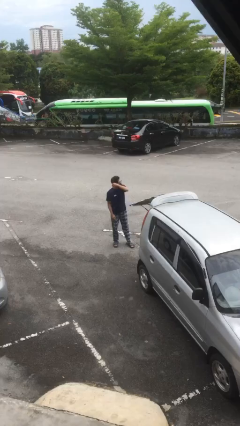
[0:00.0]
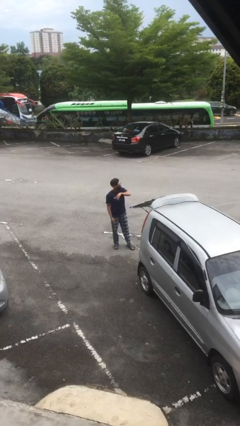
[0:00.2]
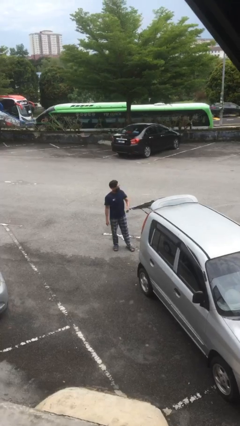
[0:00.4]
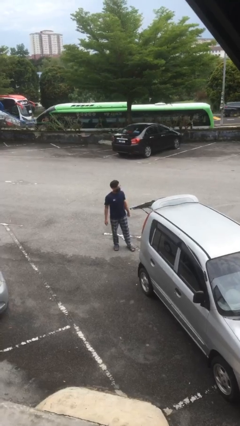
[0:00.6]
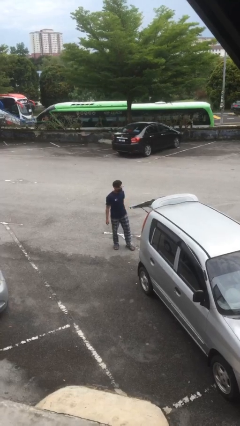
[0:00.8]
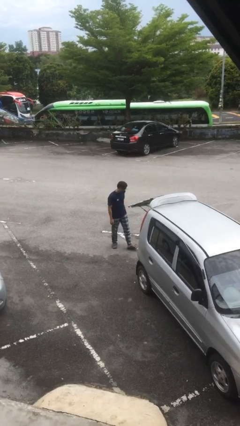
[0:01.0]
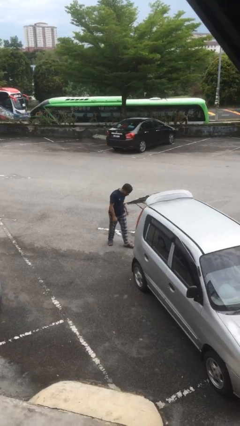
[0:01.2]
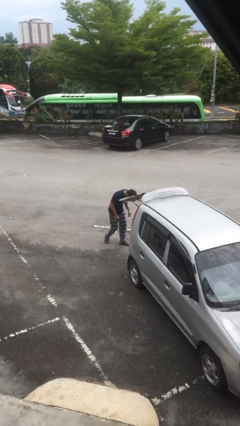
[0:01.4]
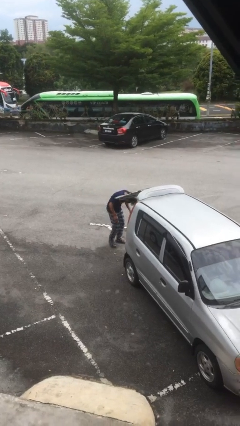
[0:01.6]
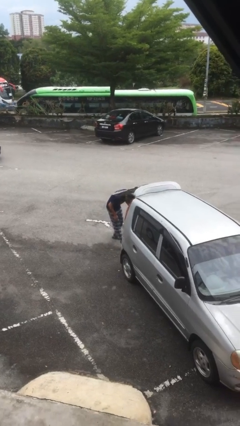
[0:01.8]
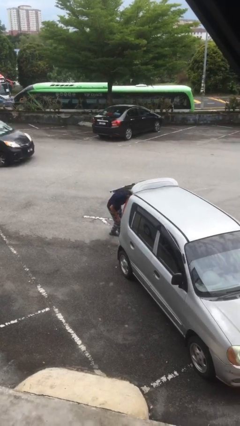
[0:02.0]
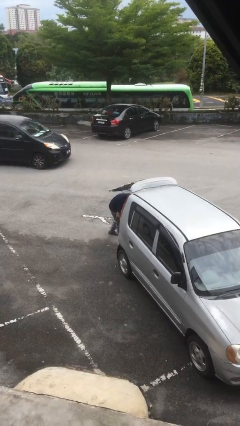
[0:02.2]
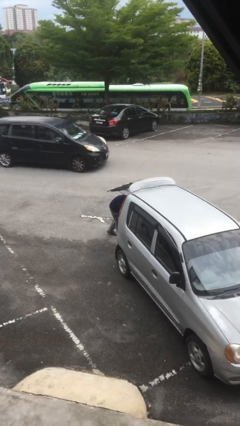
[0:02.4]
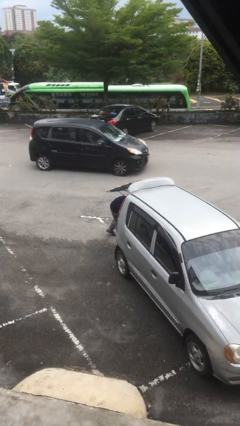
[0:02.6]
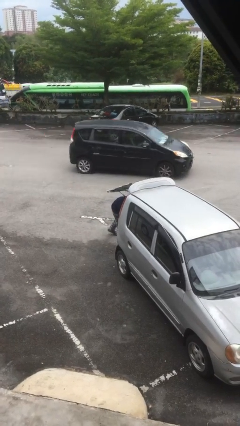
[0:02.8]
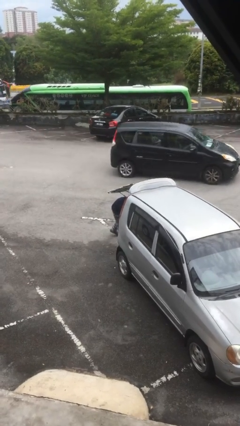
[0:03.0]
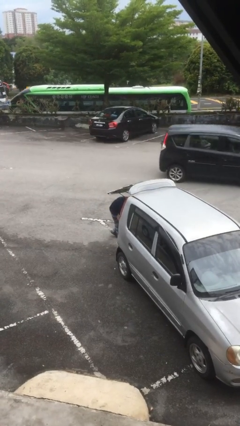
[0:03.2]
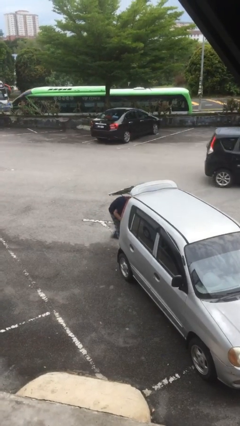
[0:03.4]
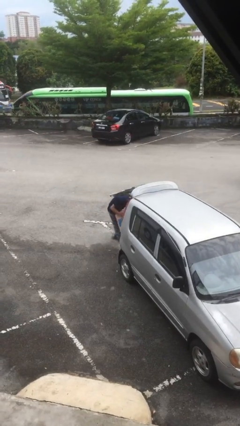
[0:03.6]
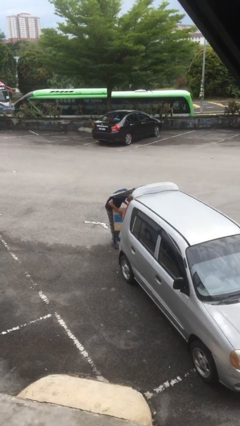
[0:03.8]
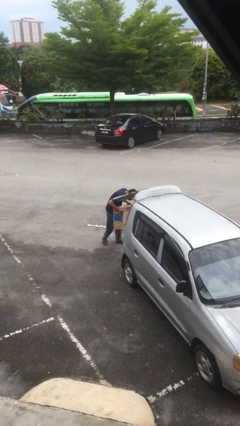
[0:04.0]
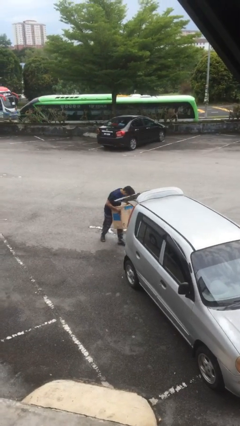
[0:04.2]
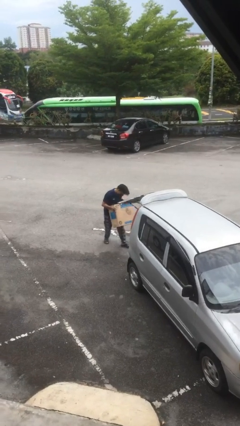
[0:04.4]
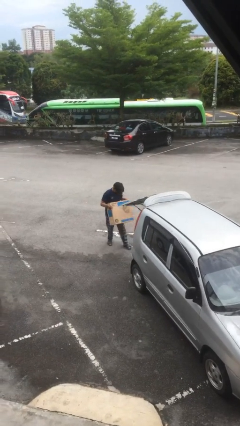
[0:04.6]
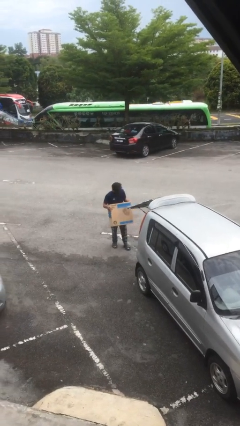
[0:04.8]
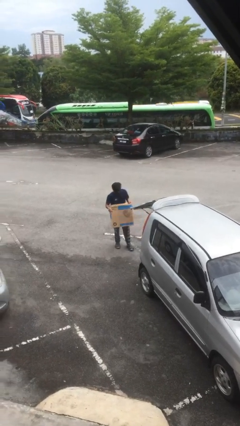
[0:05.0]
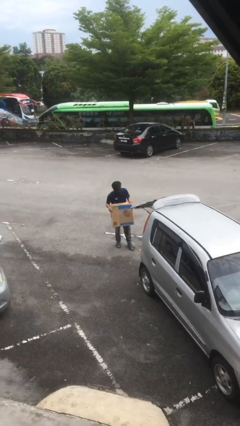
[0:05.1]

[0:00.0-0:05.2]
person unloads car

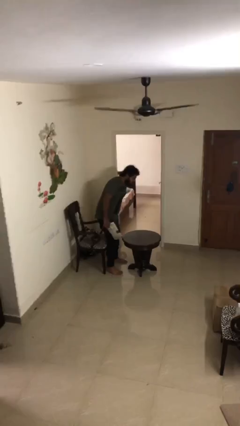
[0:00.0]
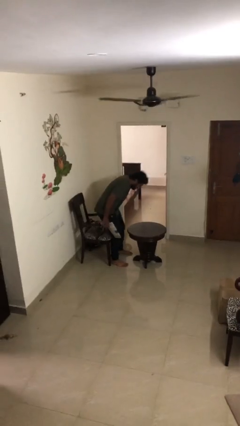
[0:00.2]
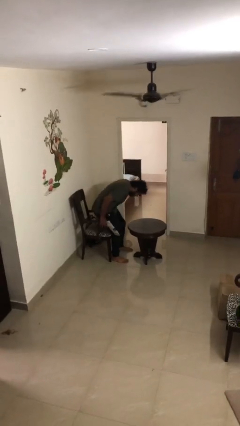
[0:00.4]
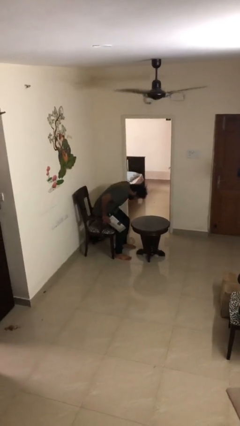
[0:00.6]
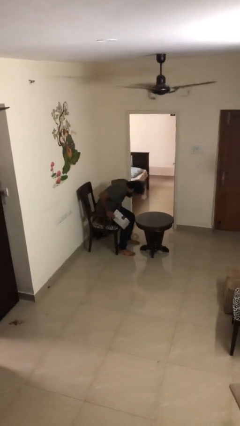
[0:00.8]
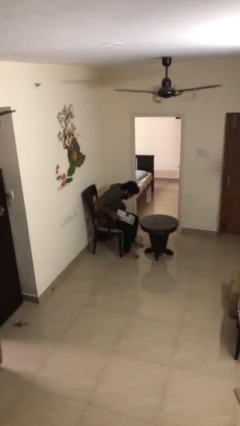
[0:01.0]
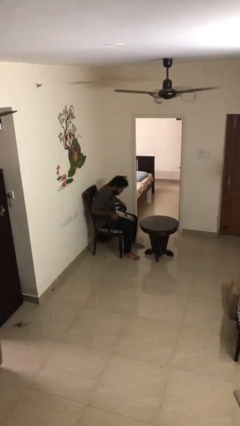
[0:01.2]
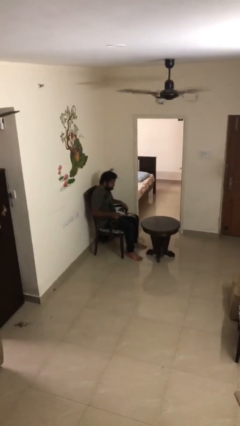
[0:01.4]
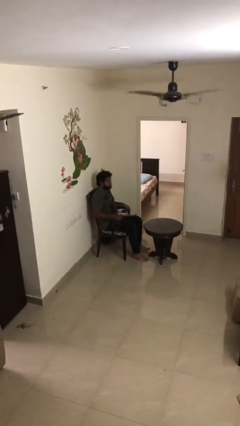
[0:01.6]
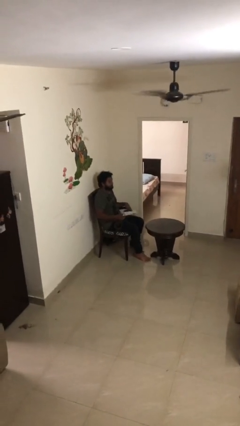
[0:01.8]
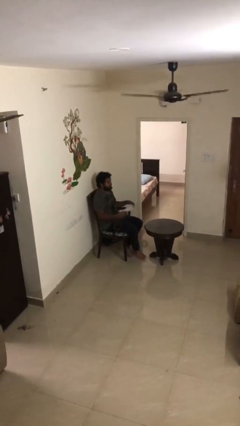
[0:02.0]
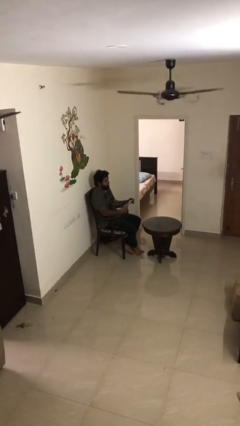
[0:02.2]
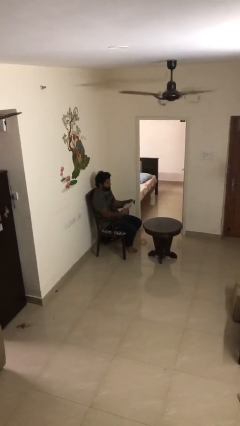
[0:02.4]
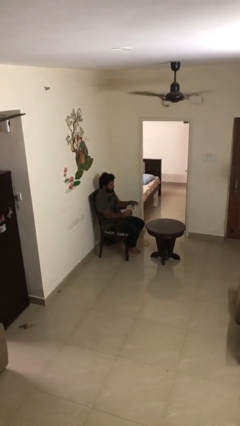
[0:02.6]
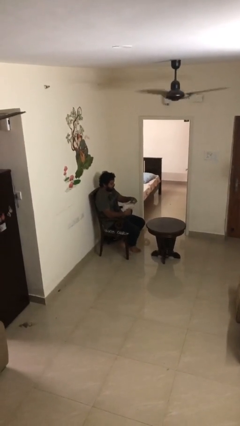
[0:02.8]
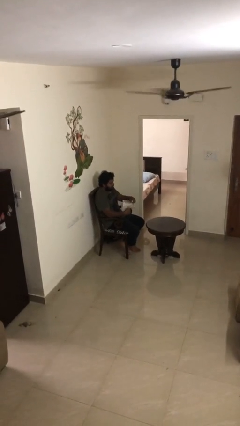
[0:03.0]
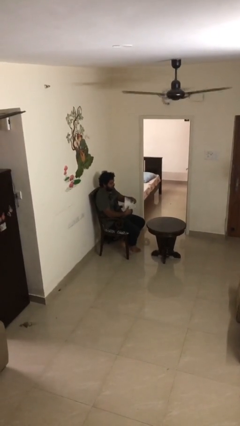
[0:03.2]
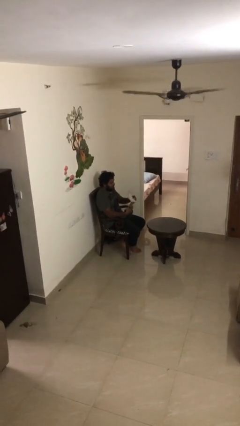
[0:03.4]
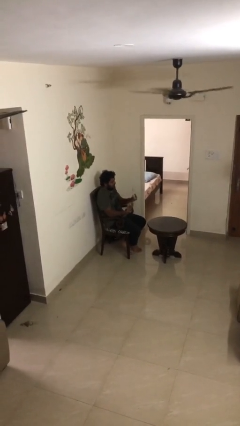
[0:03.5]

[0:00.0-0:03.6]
person sits down

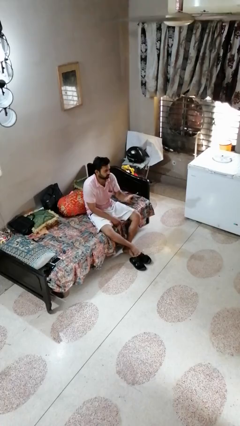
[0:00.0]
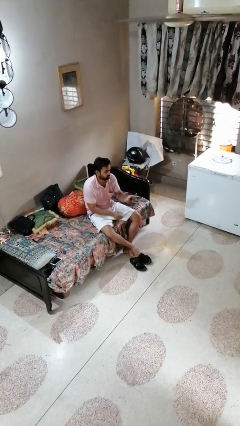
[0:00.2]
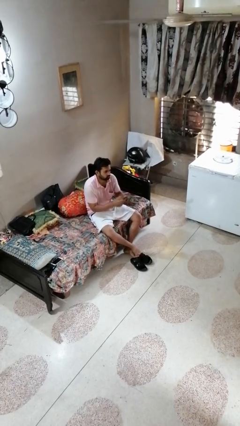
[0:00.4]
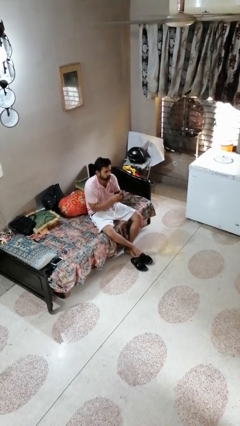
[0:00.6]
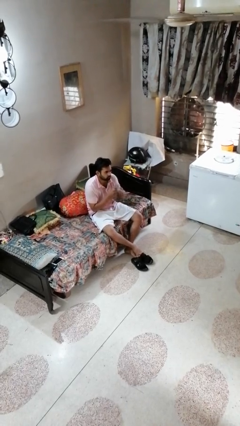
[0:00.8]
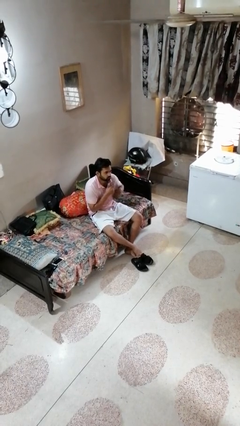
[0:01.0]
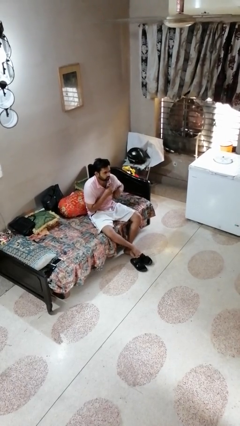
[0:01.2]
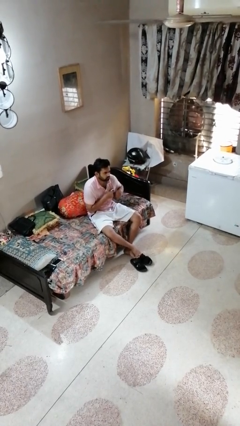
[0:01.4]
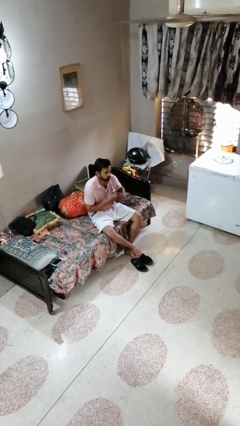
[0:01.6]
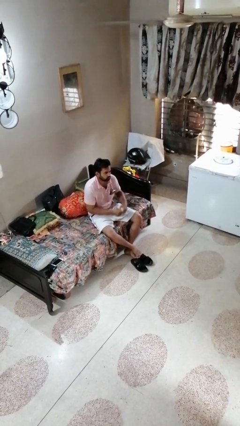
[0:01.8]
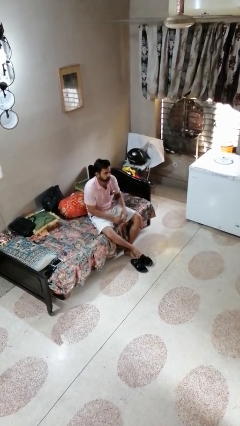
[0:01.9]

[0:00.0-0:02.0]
person puts phone into pocket

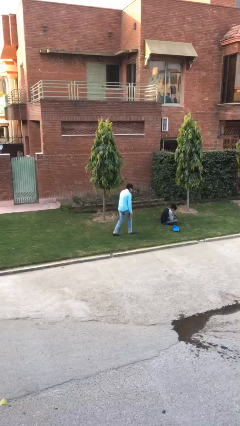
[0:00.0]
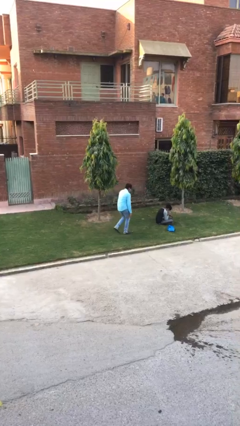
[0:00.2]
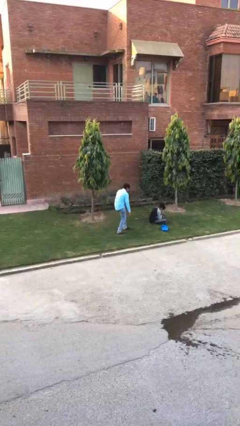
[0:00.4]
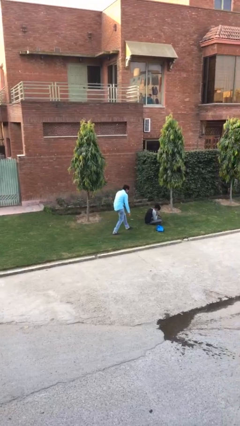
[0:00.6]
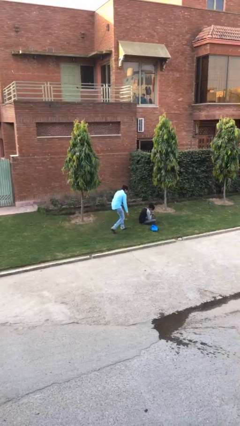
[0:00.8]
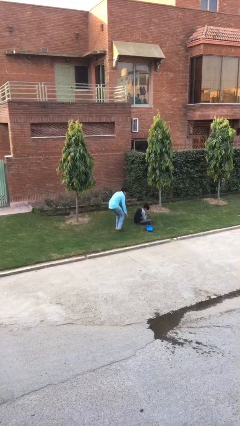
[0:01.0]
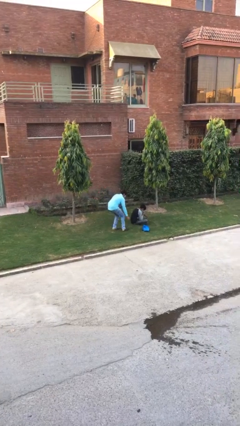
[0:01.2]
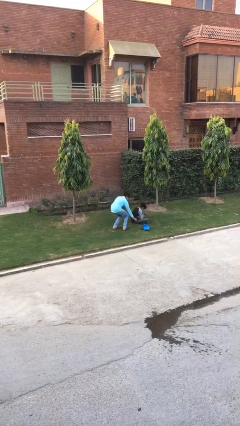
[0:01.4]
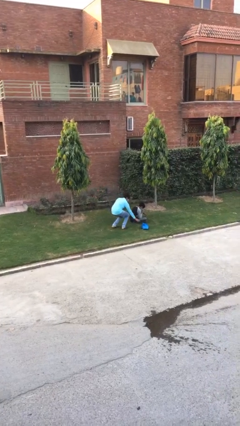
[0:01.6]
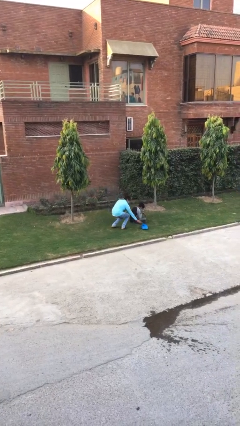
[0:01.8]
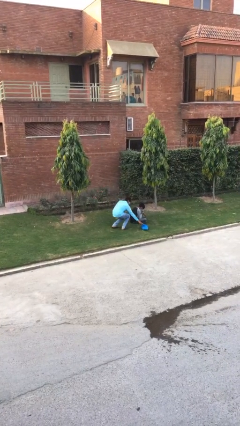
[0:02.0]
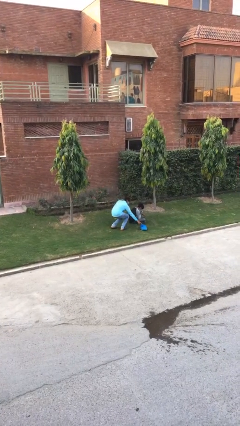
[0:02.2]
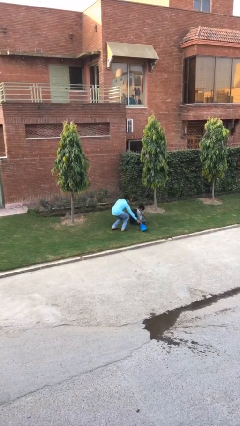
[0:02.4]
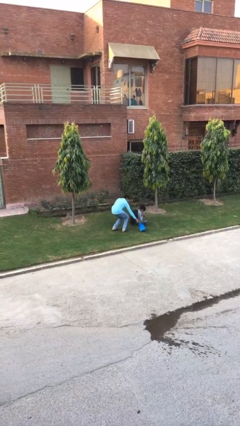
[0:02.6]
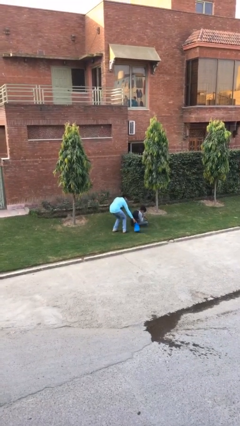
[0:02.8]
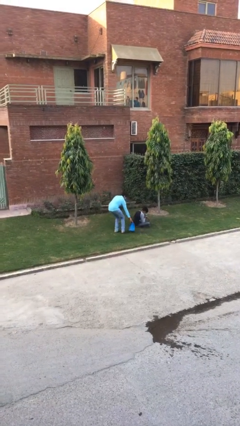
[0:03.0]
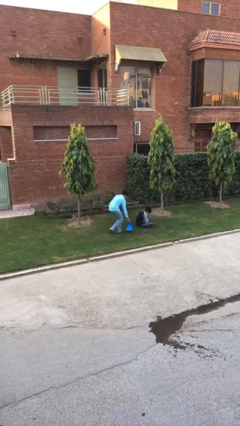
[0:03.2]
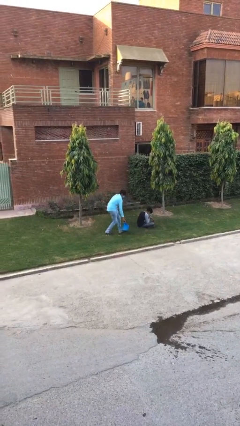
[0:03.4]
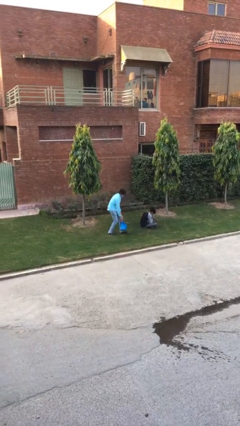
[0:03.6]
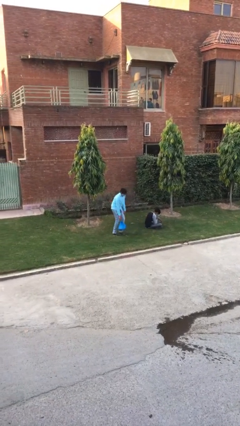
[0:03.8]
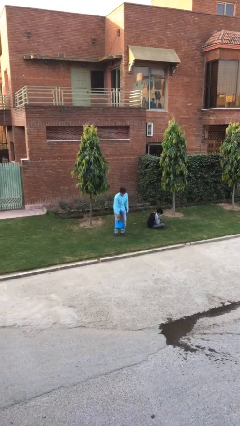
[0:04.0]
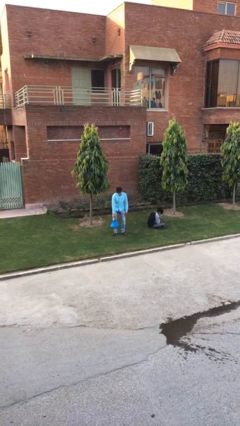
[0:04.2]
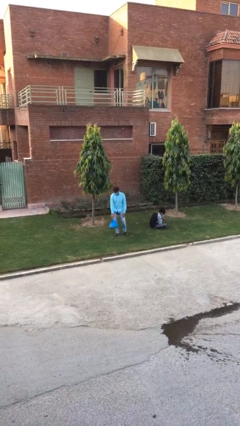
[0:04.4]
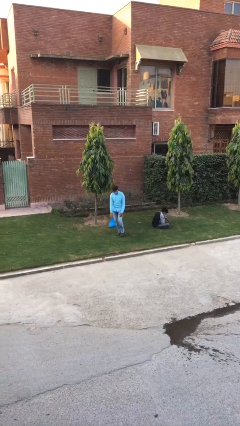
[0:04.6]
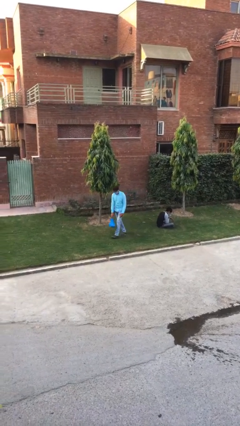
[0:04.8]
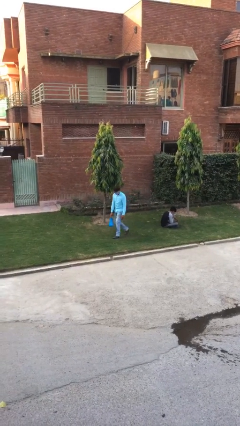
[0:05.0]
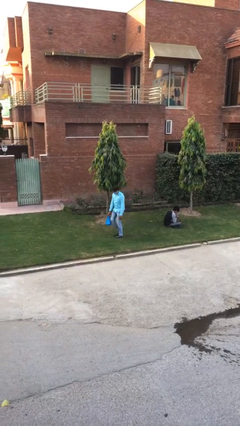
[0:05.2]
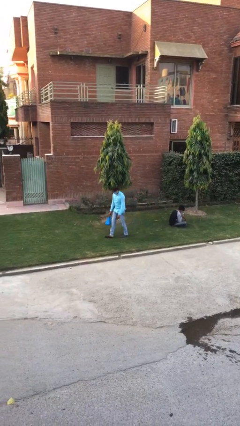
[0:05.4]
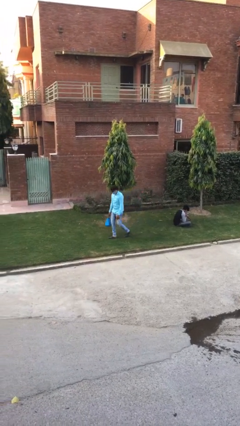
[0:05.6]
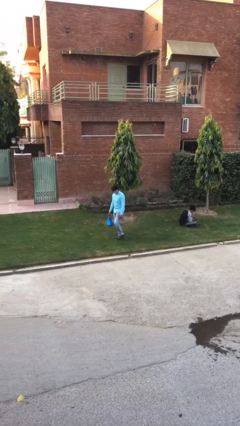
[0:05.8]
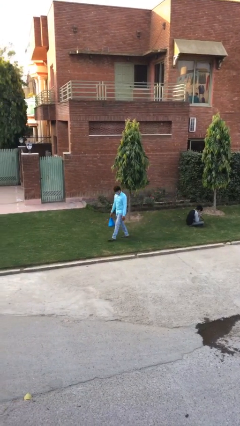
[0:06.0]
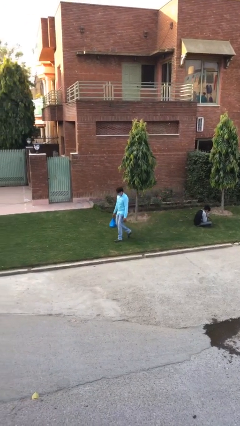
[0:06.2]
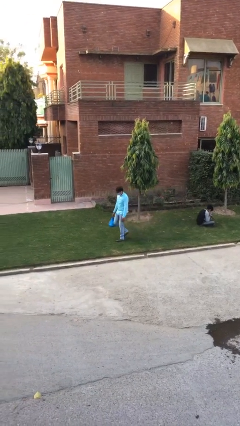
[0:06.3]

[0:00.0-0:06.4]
person steals object from person
